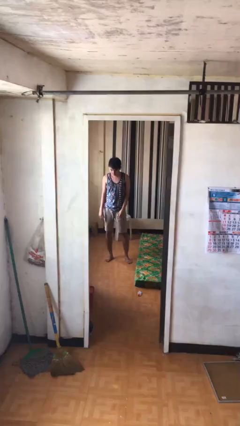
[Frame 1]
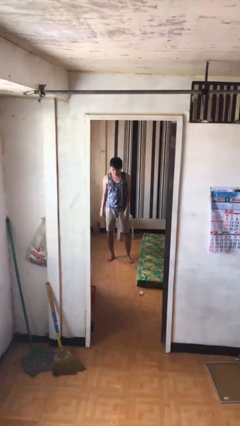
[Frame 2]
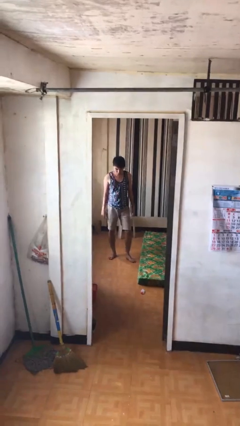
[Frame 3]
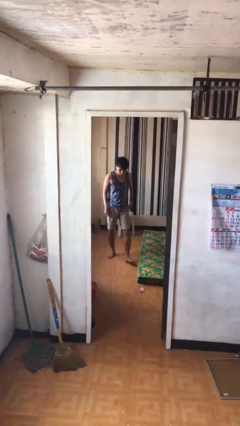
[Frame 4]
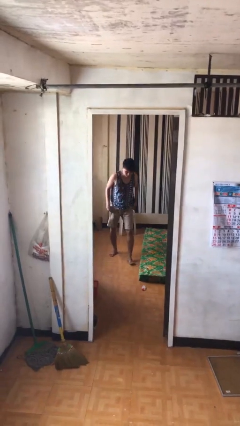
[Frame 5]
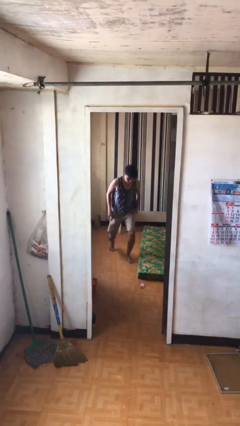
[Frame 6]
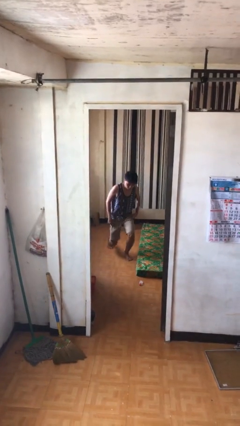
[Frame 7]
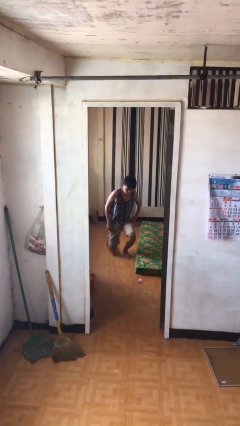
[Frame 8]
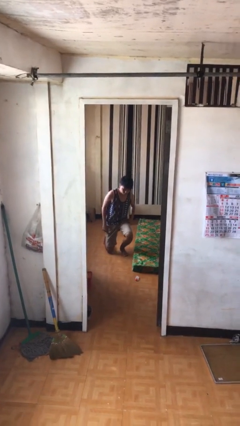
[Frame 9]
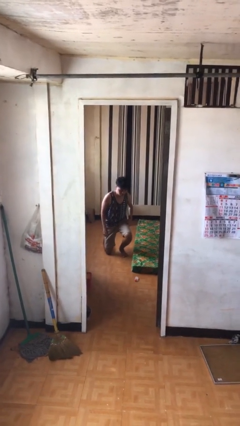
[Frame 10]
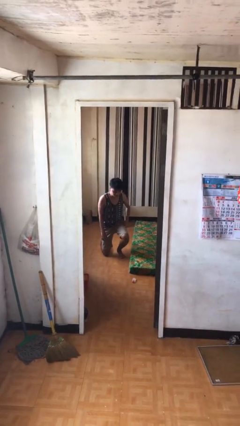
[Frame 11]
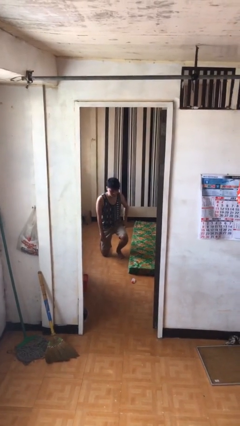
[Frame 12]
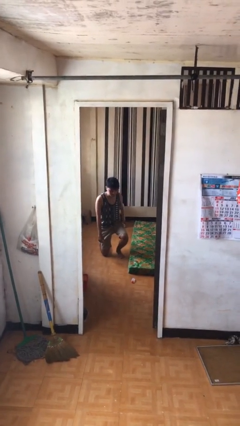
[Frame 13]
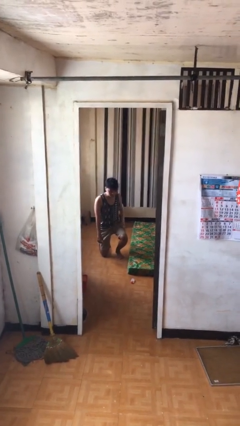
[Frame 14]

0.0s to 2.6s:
person kneels

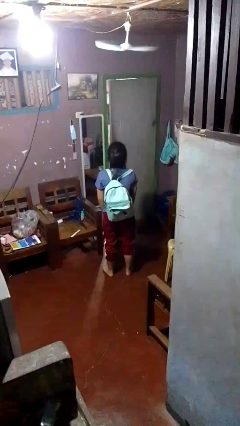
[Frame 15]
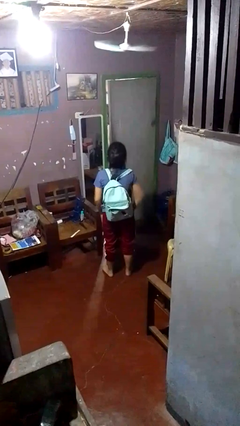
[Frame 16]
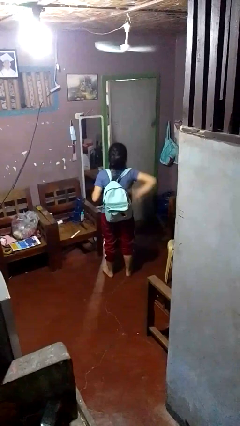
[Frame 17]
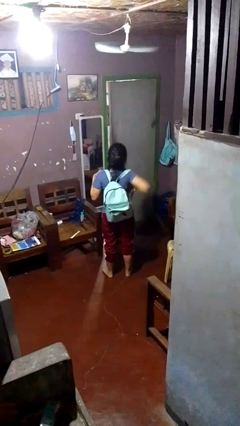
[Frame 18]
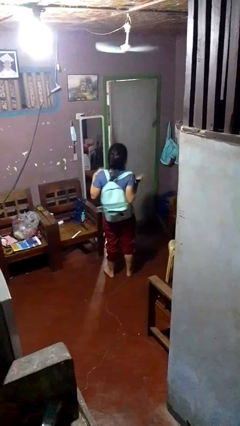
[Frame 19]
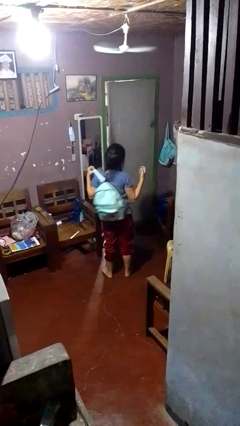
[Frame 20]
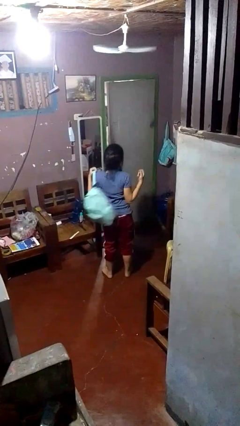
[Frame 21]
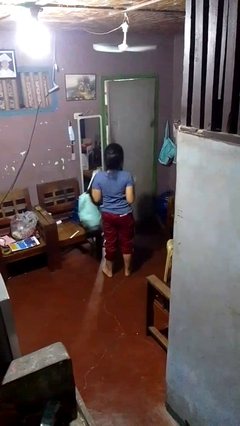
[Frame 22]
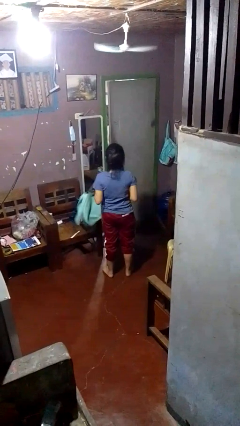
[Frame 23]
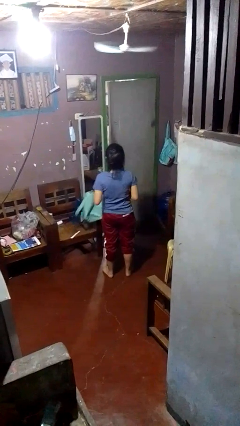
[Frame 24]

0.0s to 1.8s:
person takes off backpack

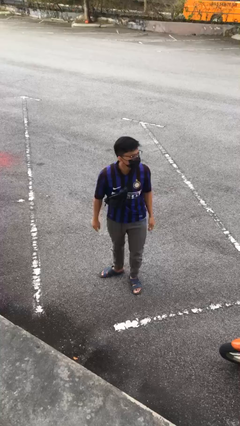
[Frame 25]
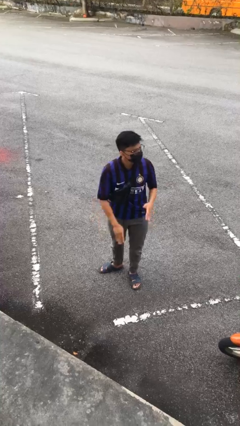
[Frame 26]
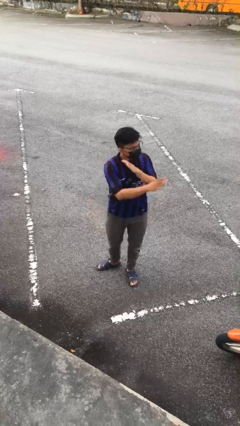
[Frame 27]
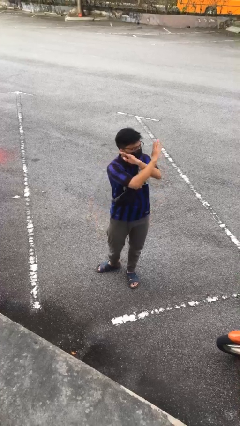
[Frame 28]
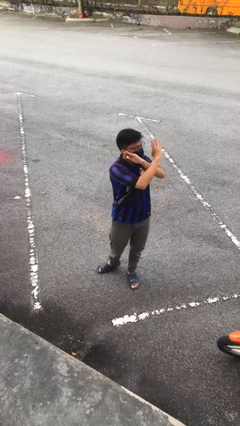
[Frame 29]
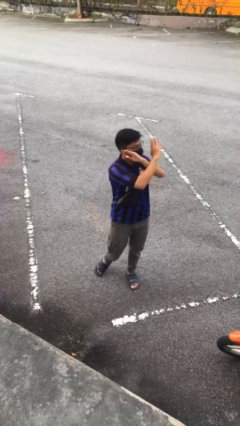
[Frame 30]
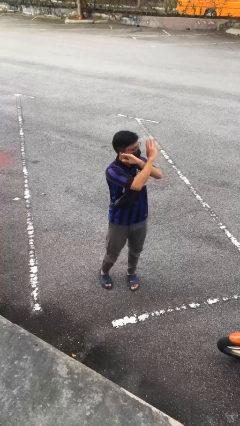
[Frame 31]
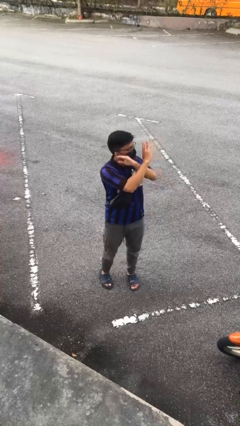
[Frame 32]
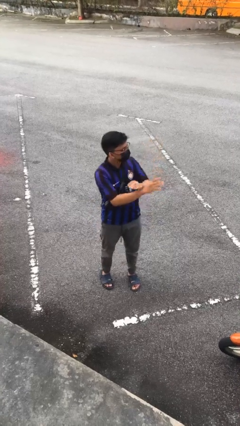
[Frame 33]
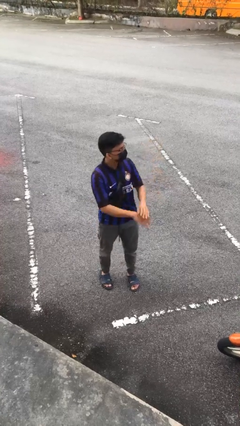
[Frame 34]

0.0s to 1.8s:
person gestures arms x

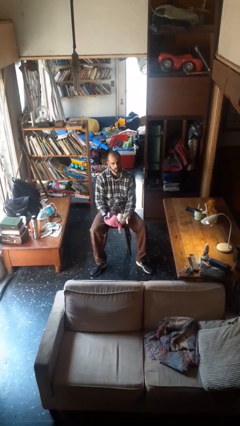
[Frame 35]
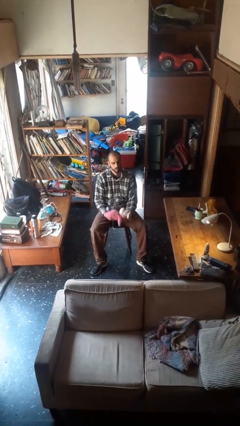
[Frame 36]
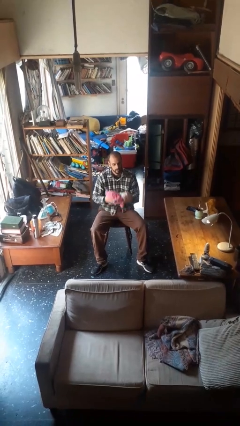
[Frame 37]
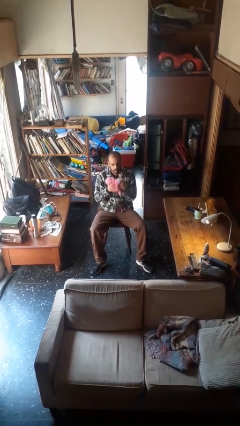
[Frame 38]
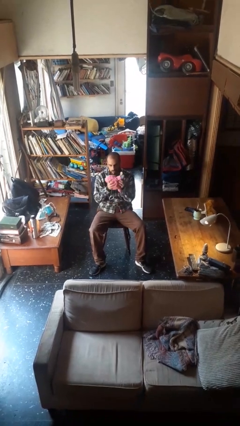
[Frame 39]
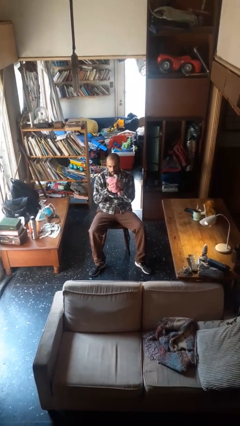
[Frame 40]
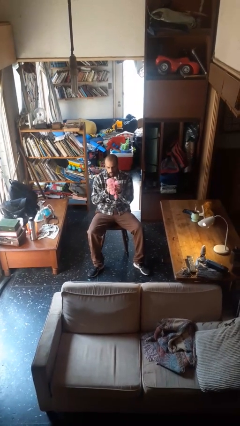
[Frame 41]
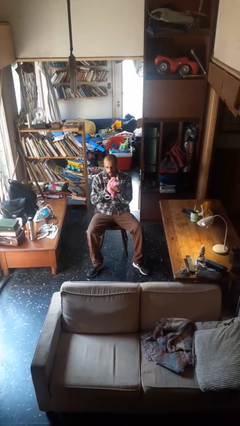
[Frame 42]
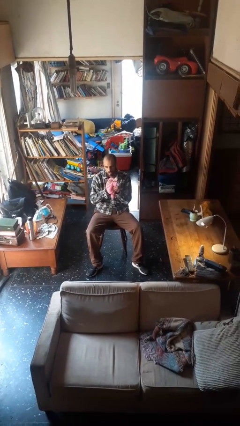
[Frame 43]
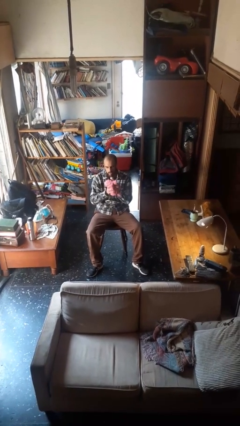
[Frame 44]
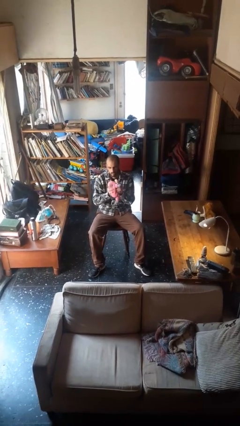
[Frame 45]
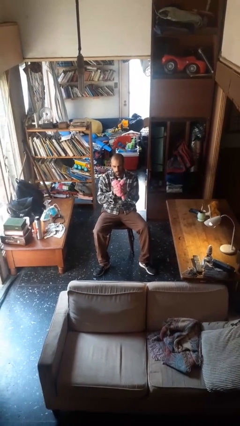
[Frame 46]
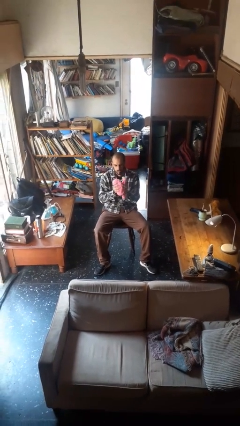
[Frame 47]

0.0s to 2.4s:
person squeezes object

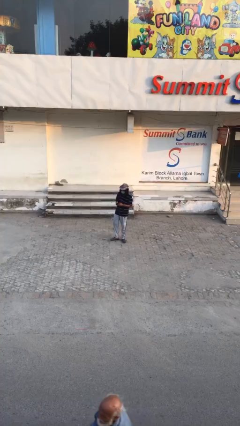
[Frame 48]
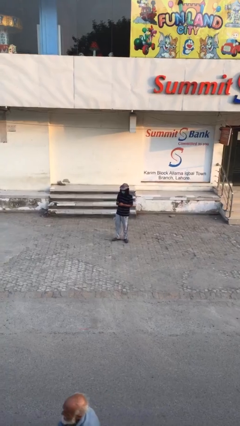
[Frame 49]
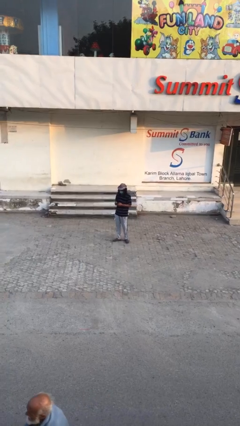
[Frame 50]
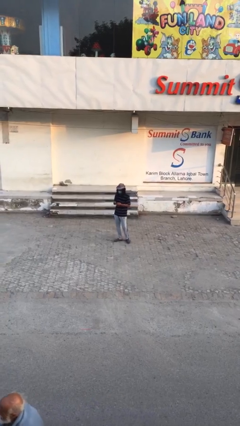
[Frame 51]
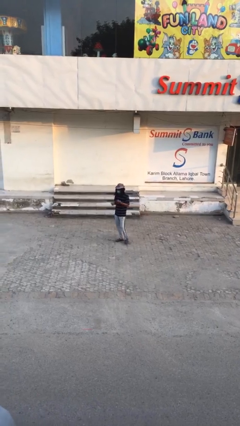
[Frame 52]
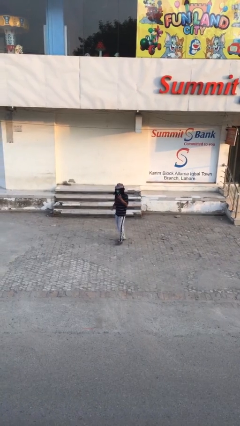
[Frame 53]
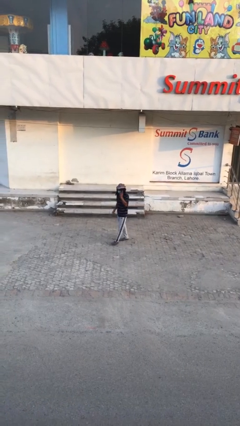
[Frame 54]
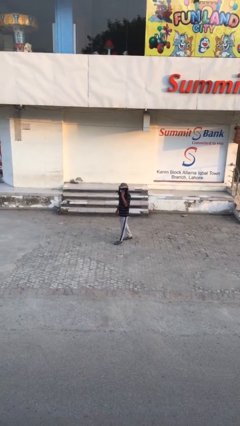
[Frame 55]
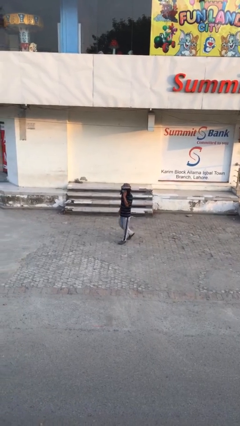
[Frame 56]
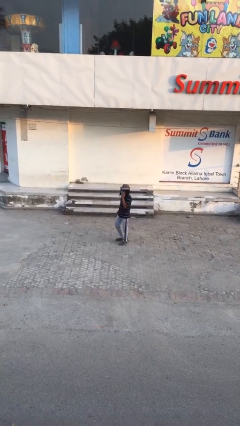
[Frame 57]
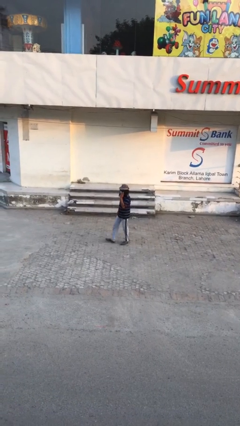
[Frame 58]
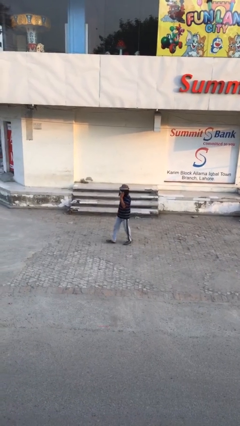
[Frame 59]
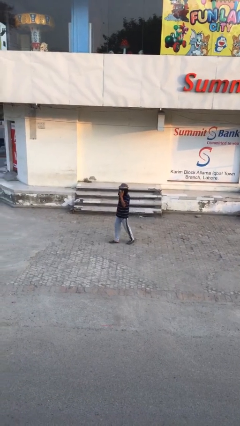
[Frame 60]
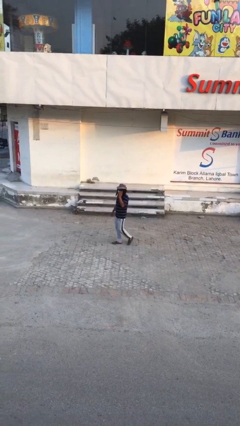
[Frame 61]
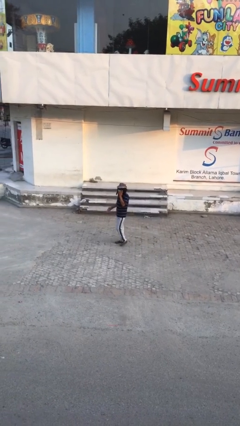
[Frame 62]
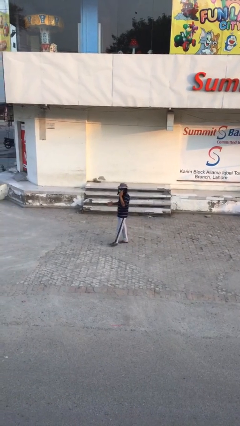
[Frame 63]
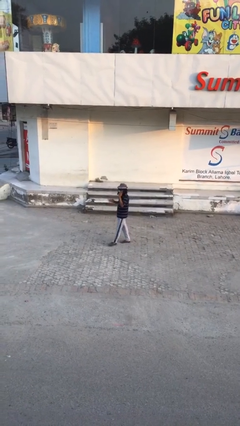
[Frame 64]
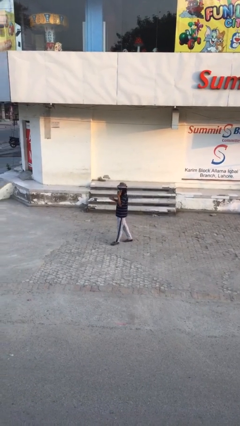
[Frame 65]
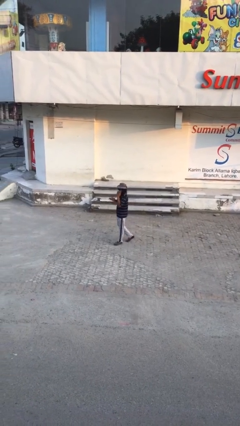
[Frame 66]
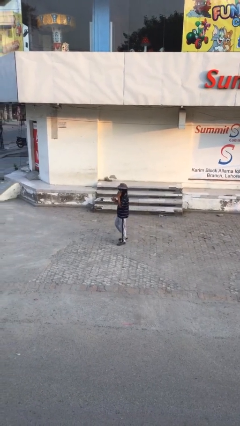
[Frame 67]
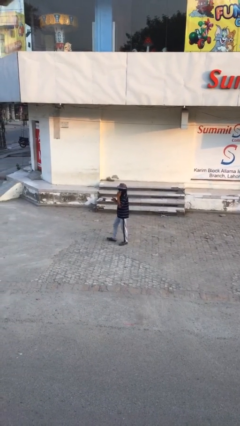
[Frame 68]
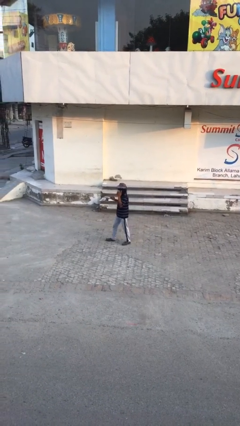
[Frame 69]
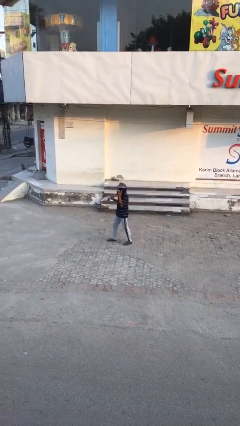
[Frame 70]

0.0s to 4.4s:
person talks on phone

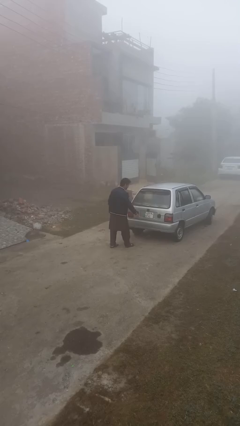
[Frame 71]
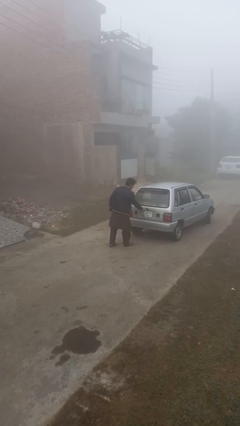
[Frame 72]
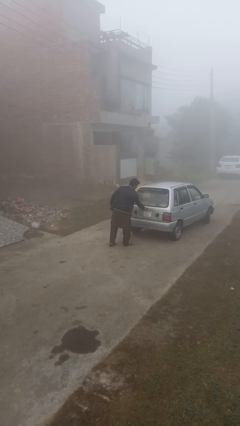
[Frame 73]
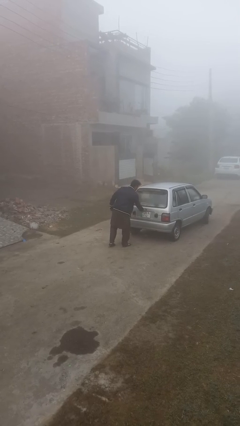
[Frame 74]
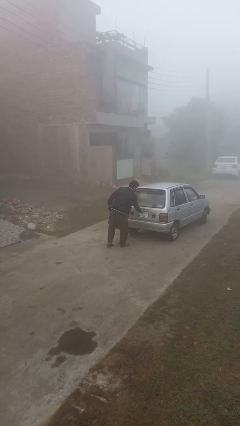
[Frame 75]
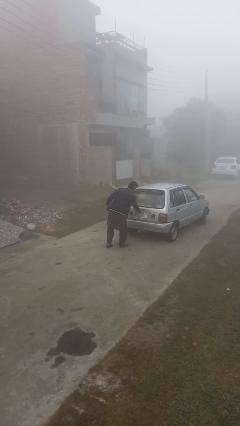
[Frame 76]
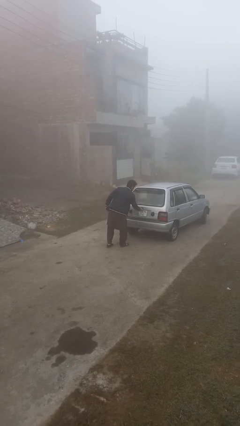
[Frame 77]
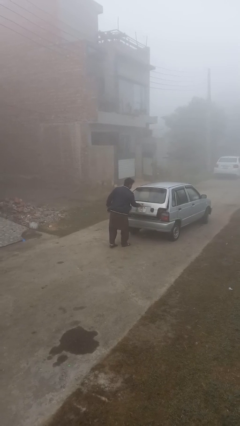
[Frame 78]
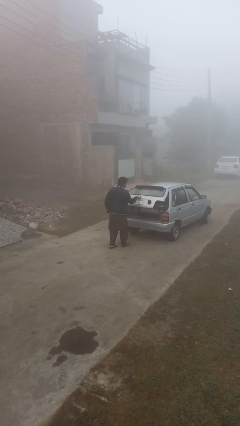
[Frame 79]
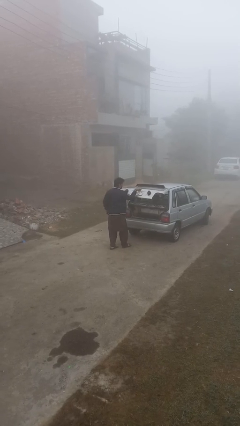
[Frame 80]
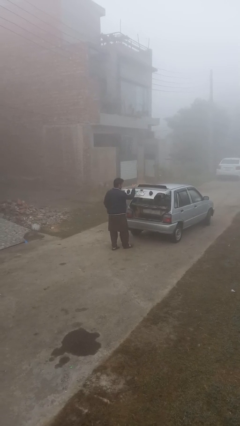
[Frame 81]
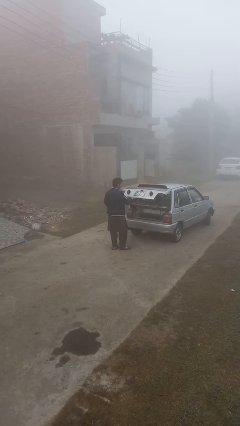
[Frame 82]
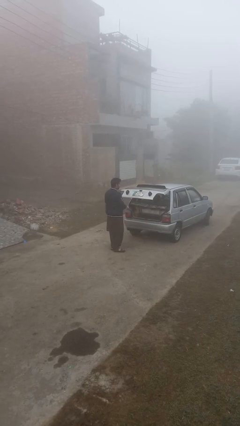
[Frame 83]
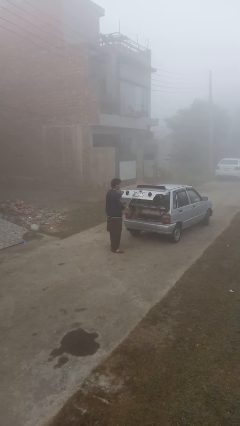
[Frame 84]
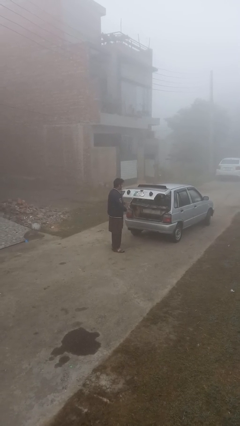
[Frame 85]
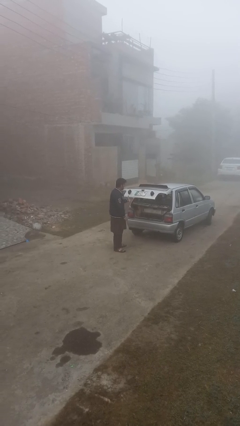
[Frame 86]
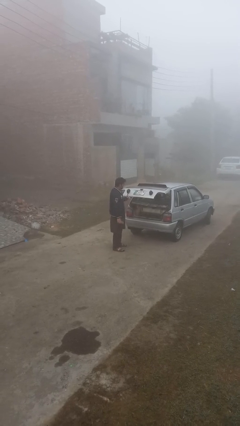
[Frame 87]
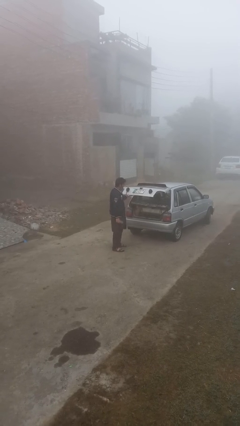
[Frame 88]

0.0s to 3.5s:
person opens car trunk

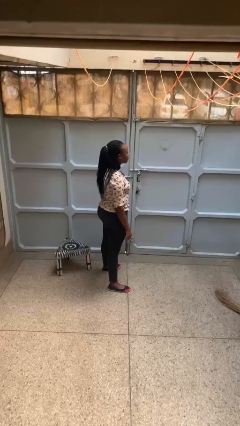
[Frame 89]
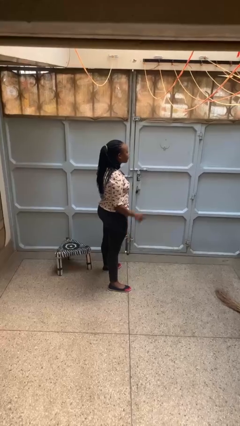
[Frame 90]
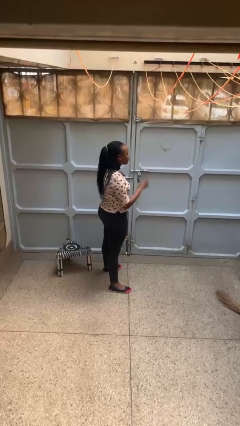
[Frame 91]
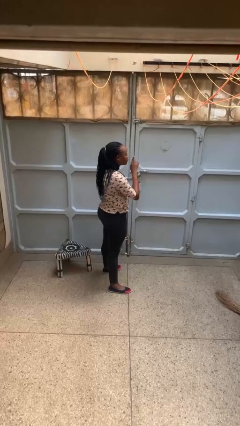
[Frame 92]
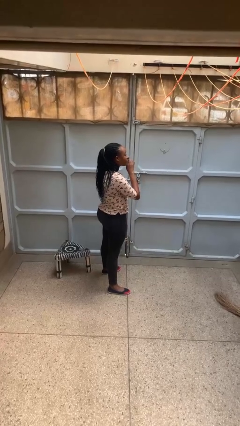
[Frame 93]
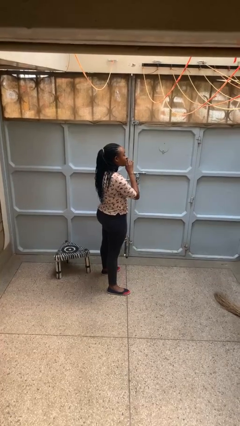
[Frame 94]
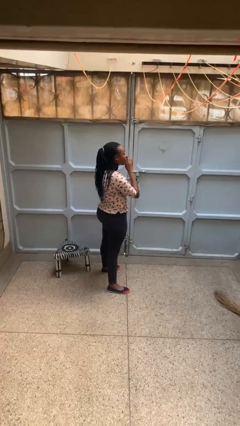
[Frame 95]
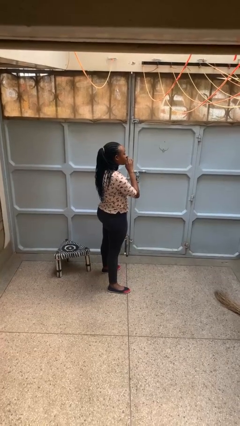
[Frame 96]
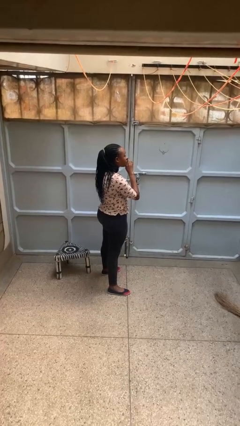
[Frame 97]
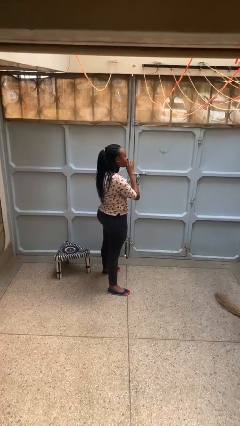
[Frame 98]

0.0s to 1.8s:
person gestures be quiet
